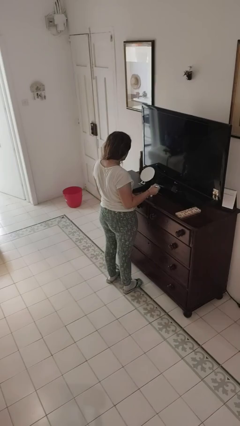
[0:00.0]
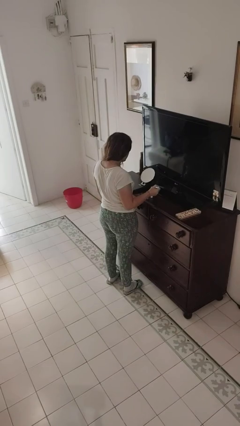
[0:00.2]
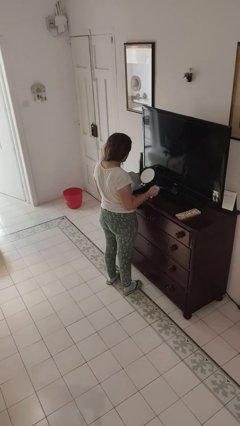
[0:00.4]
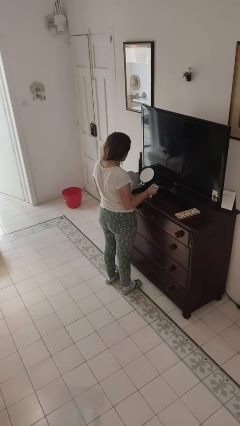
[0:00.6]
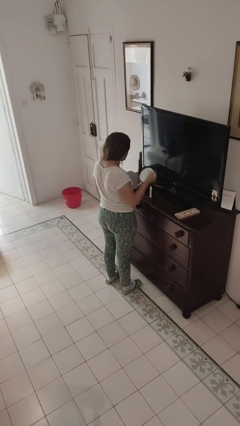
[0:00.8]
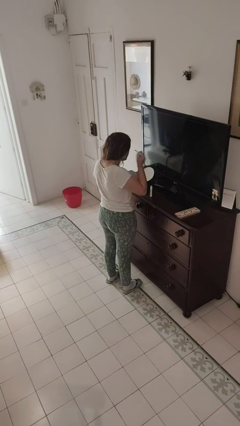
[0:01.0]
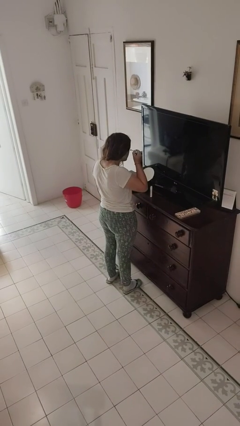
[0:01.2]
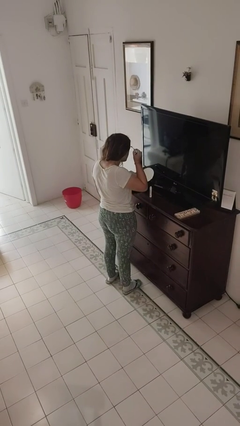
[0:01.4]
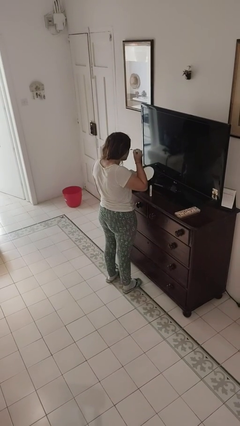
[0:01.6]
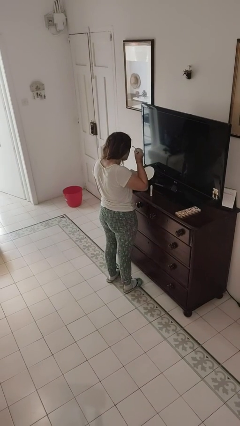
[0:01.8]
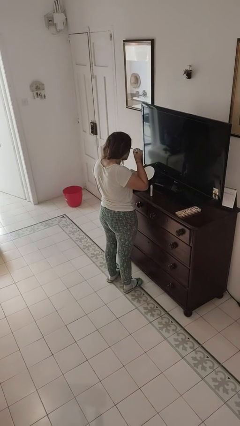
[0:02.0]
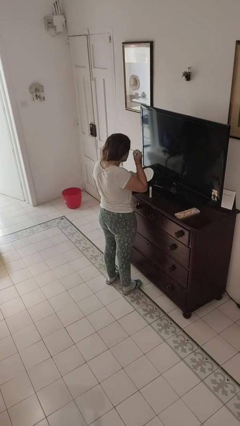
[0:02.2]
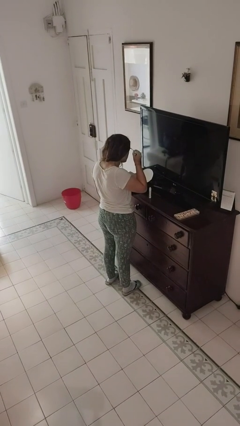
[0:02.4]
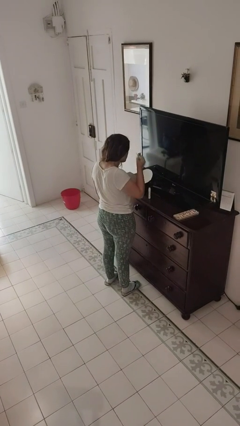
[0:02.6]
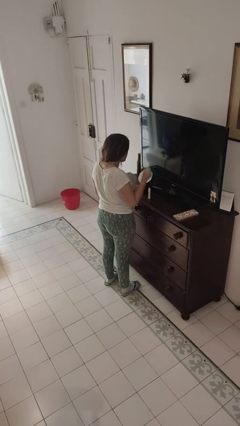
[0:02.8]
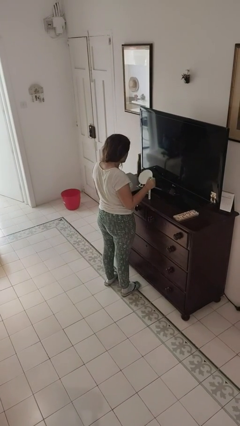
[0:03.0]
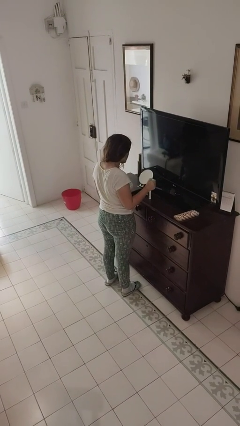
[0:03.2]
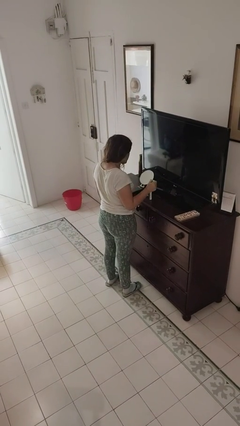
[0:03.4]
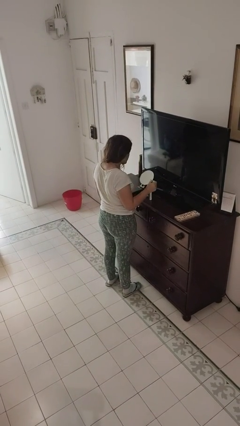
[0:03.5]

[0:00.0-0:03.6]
person applies eye makeup

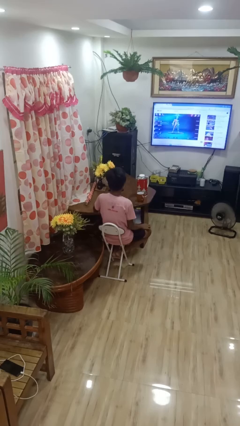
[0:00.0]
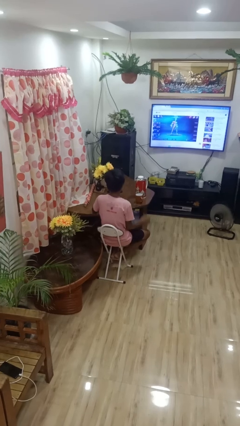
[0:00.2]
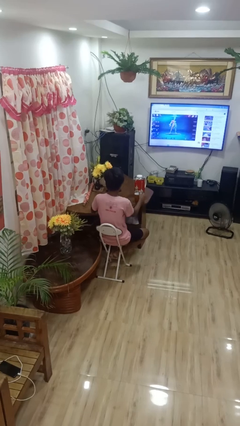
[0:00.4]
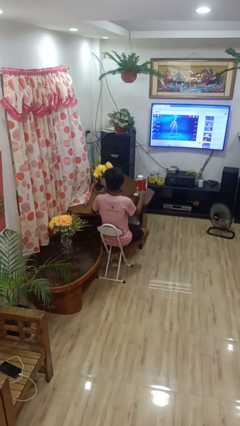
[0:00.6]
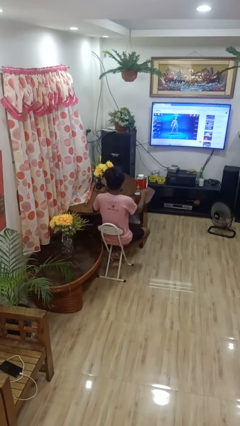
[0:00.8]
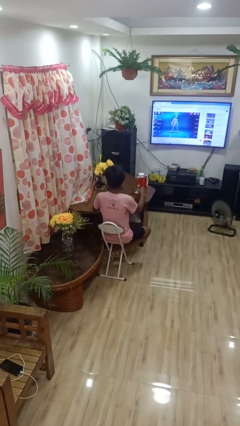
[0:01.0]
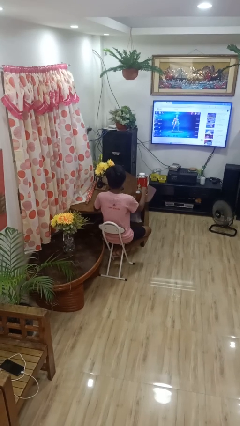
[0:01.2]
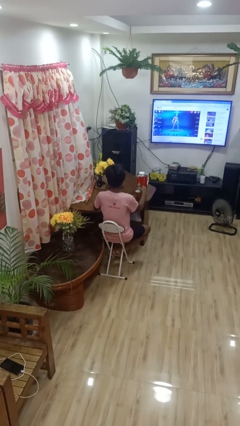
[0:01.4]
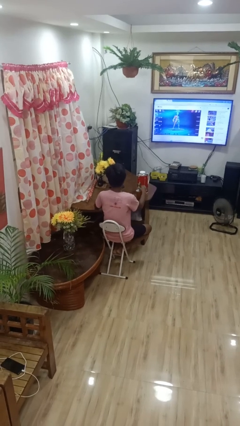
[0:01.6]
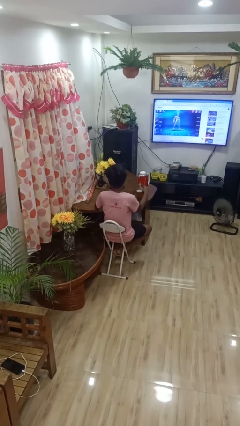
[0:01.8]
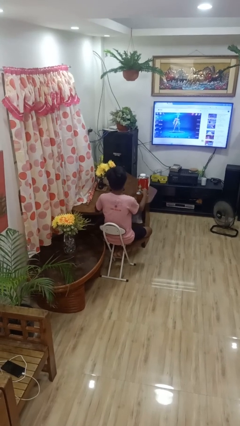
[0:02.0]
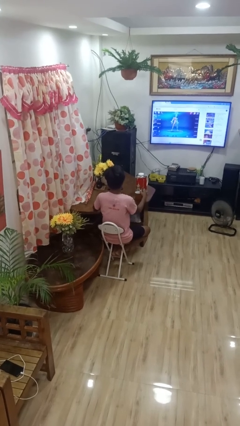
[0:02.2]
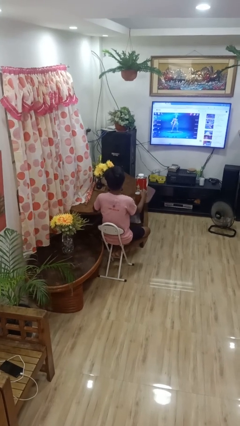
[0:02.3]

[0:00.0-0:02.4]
person stirs mug

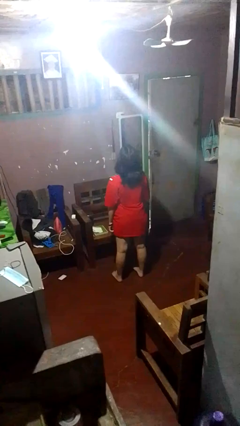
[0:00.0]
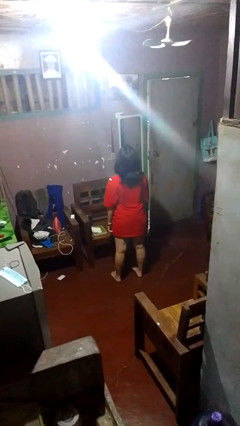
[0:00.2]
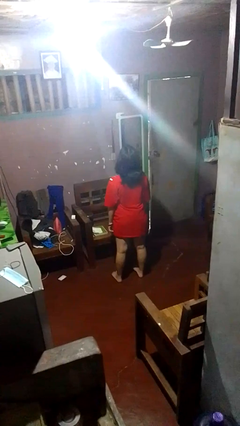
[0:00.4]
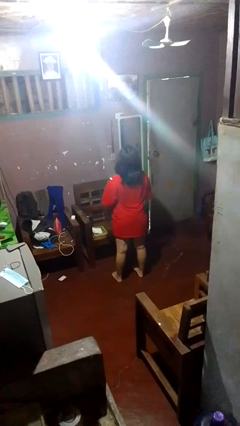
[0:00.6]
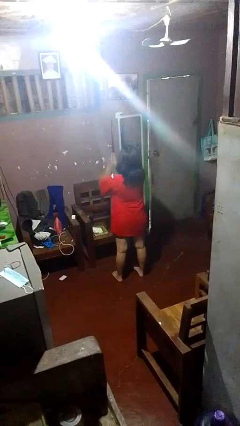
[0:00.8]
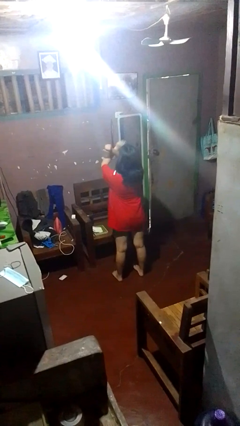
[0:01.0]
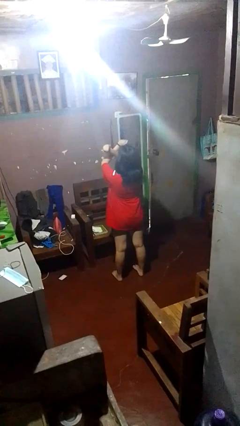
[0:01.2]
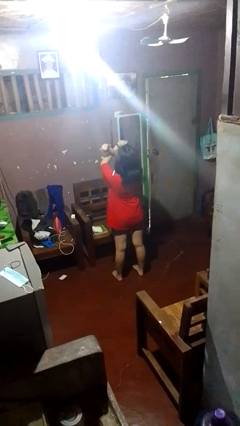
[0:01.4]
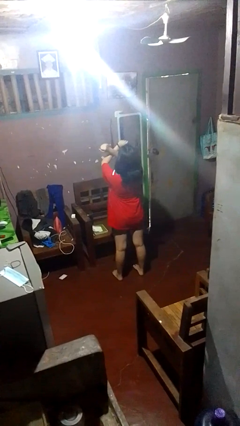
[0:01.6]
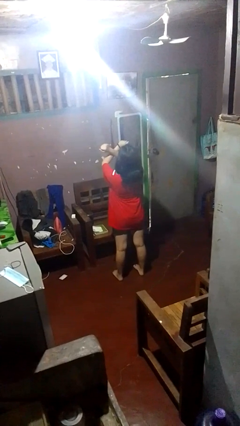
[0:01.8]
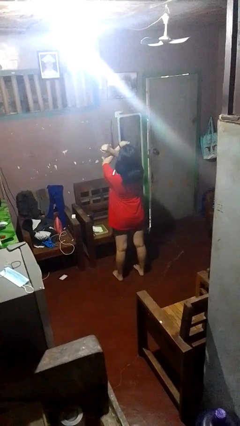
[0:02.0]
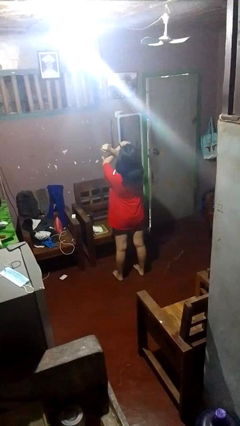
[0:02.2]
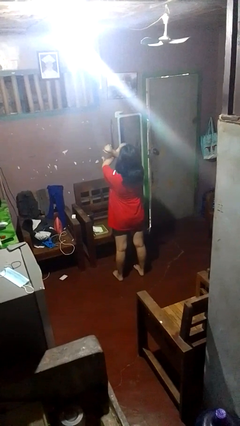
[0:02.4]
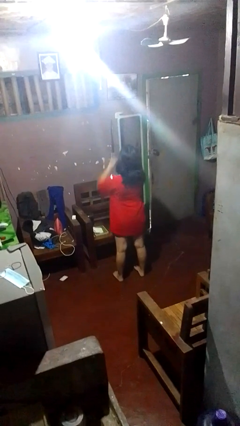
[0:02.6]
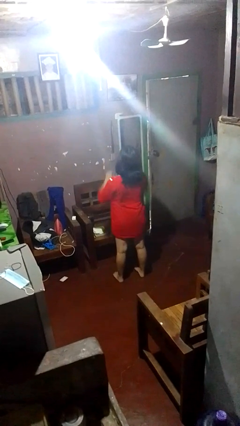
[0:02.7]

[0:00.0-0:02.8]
person gestures arms x

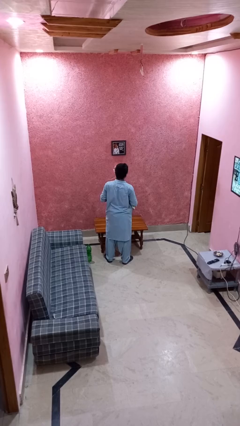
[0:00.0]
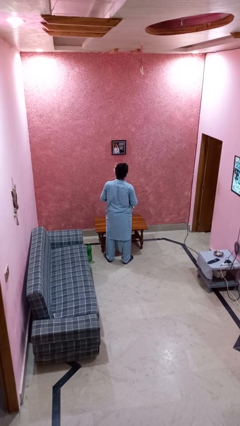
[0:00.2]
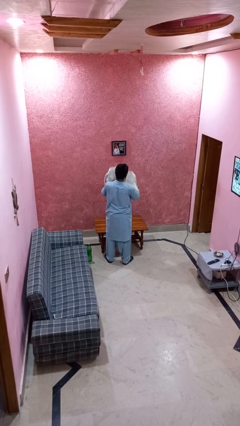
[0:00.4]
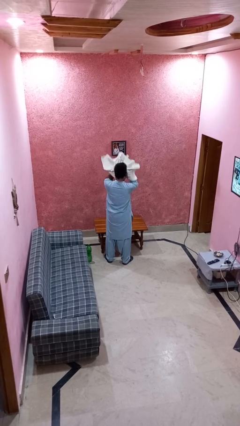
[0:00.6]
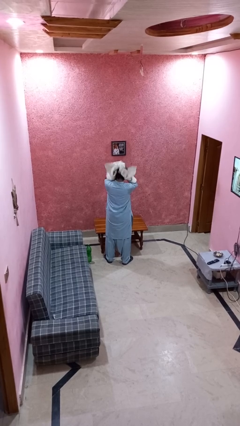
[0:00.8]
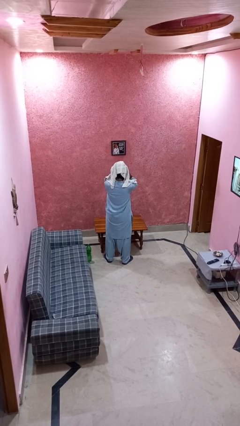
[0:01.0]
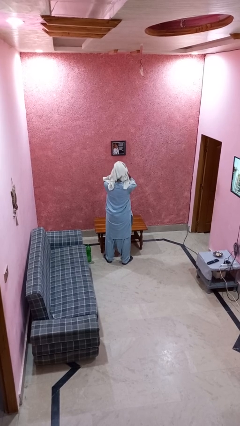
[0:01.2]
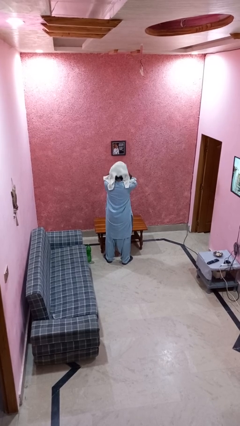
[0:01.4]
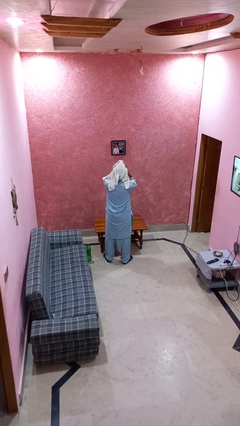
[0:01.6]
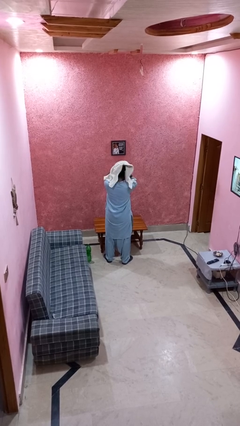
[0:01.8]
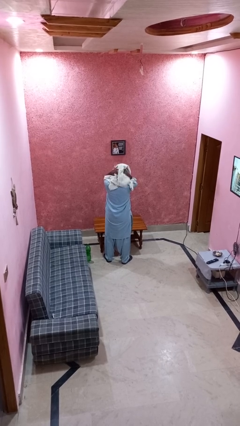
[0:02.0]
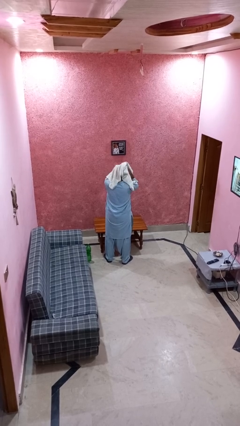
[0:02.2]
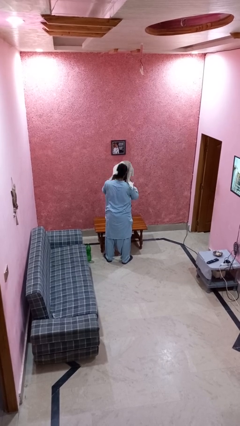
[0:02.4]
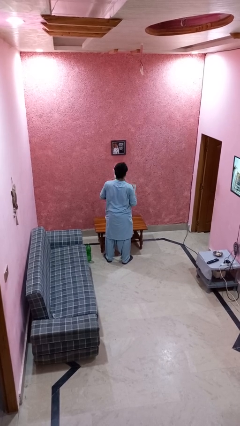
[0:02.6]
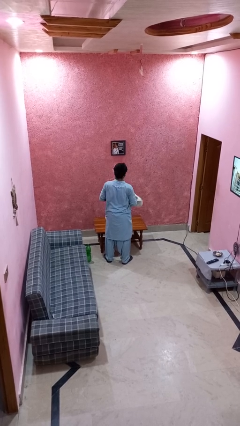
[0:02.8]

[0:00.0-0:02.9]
person dries hair with towel

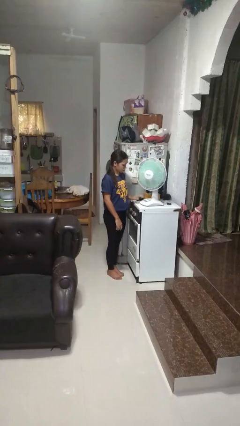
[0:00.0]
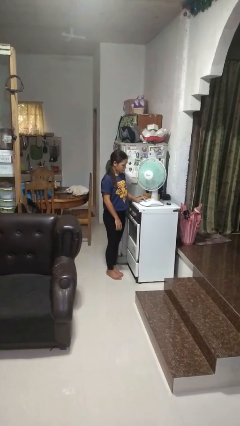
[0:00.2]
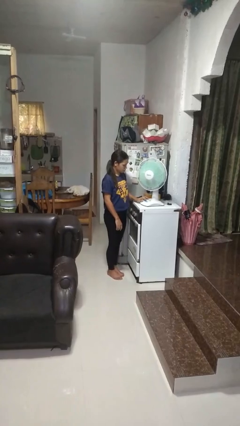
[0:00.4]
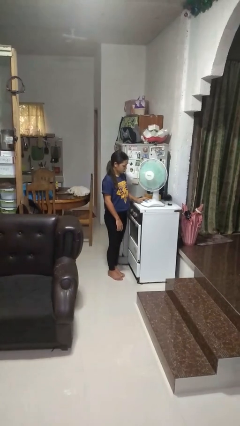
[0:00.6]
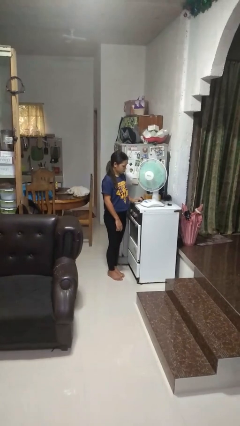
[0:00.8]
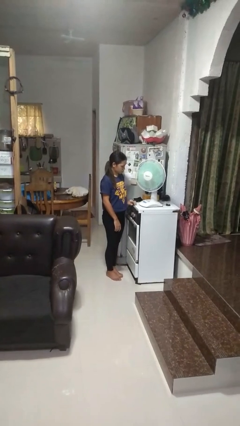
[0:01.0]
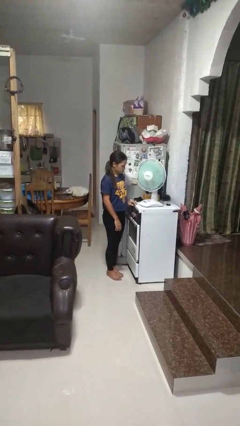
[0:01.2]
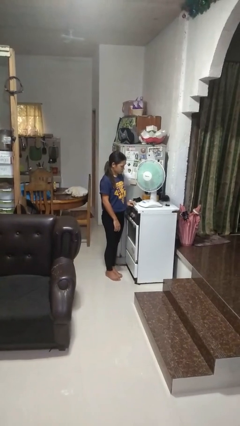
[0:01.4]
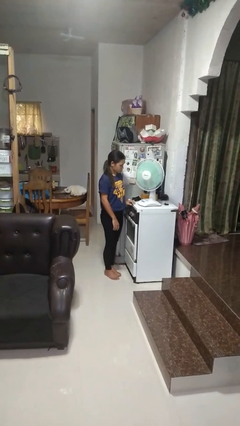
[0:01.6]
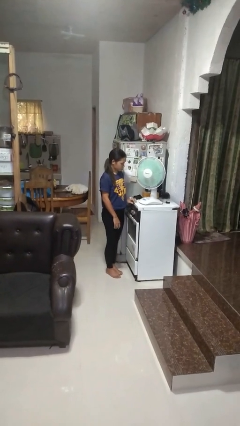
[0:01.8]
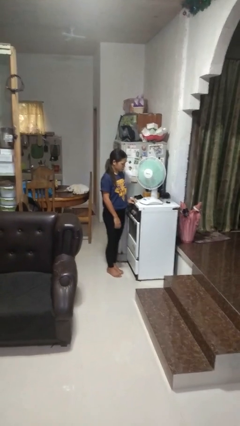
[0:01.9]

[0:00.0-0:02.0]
person turns on fan

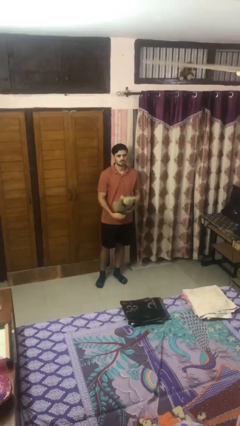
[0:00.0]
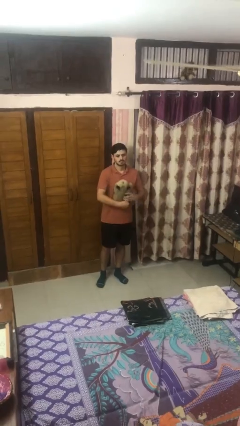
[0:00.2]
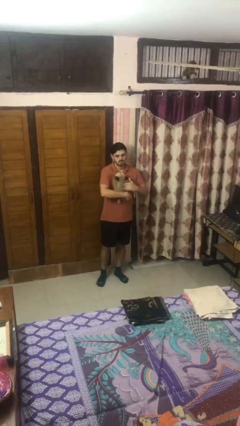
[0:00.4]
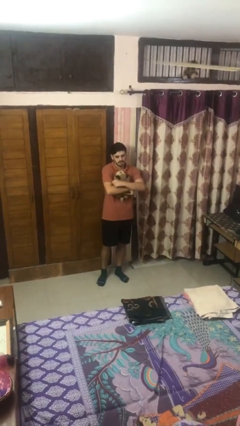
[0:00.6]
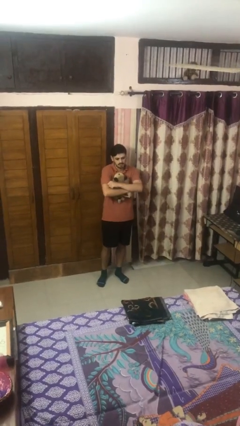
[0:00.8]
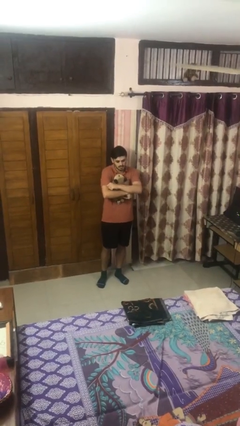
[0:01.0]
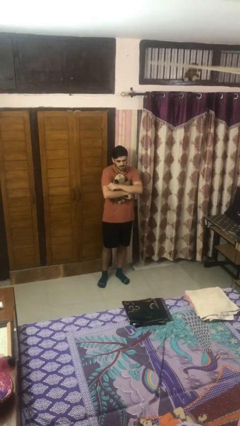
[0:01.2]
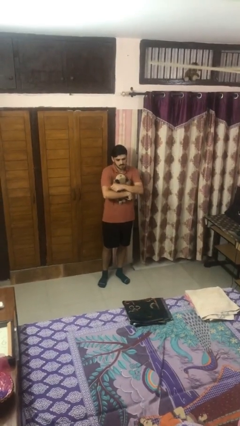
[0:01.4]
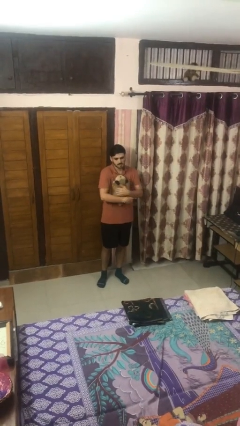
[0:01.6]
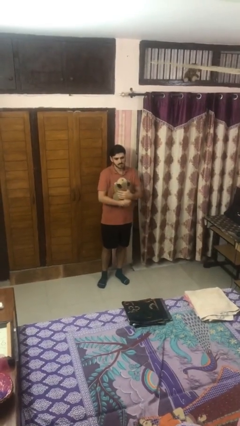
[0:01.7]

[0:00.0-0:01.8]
person hugs stuffed animal

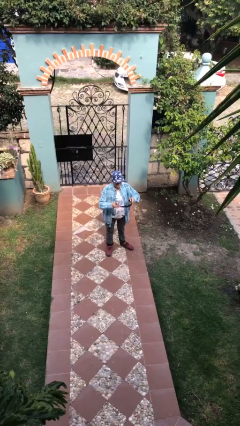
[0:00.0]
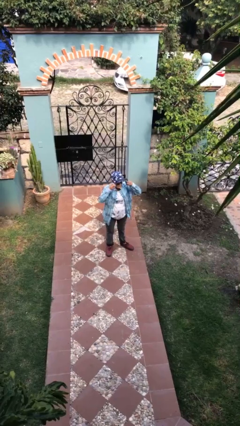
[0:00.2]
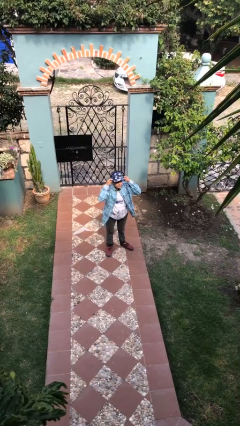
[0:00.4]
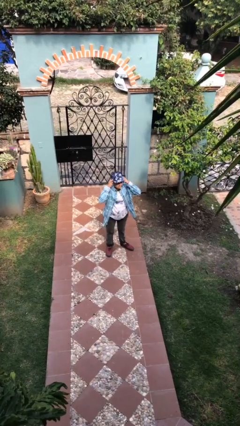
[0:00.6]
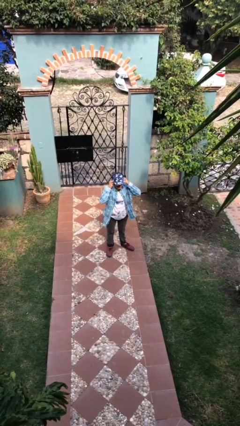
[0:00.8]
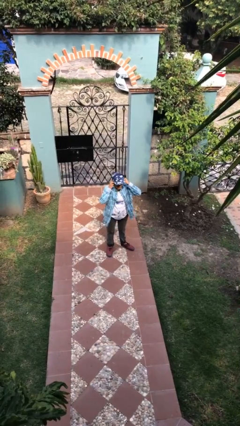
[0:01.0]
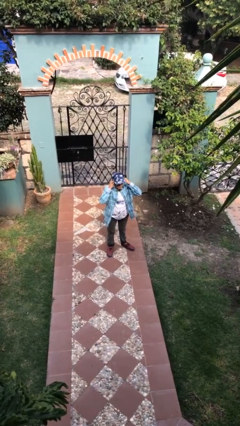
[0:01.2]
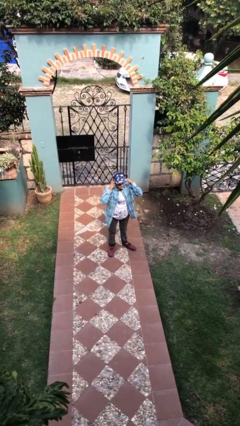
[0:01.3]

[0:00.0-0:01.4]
person puts on headphones
